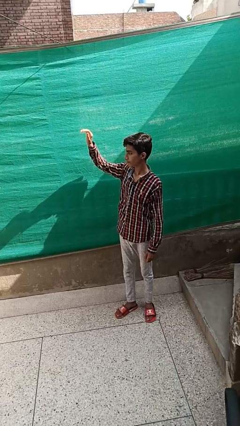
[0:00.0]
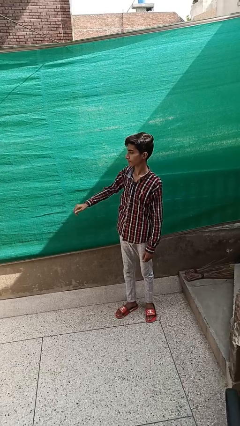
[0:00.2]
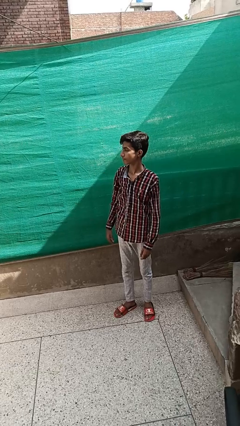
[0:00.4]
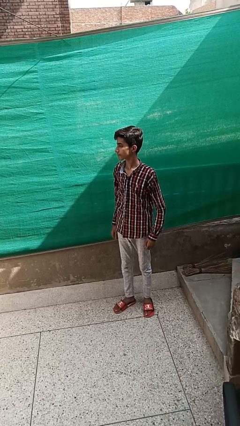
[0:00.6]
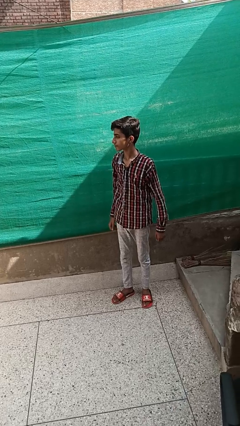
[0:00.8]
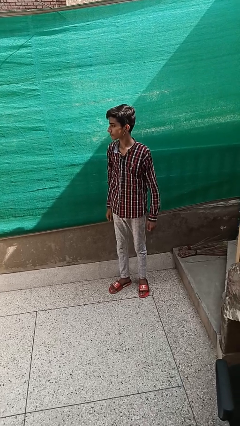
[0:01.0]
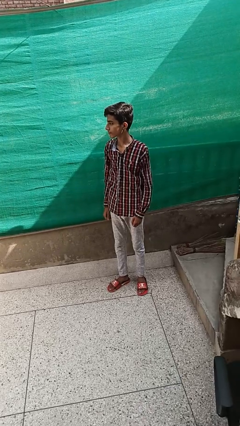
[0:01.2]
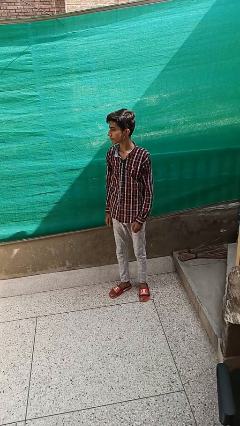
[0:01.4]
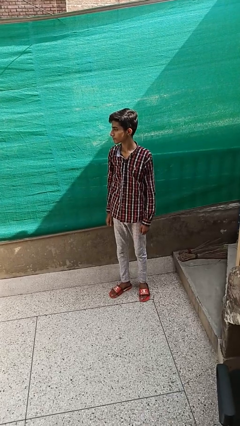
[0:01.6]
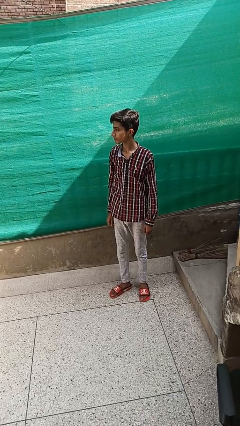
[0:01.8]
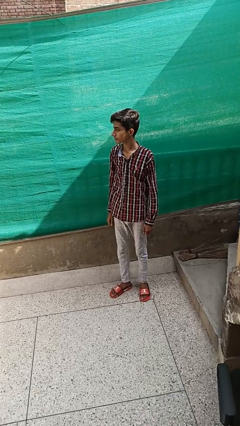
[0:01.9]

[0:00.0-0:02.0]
person gestures lower hand

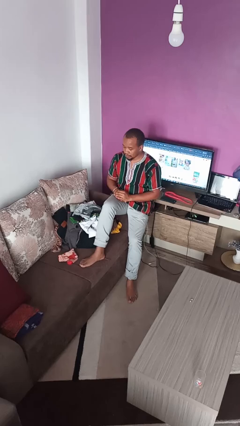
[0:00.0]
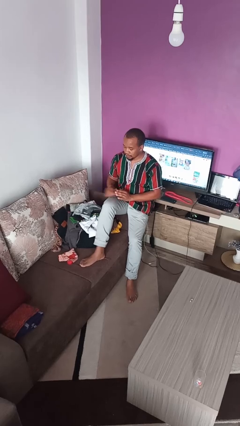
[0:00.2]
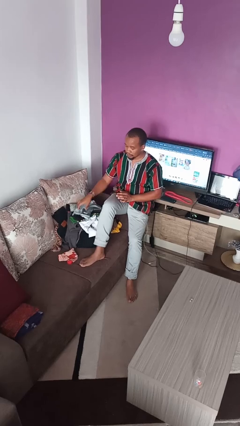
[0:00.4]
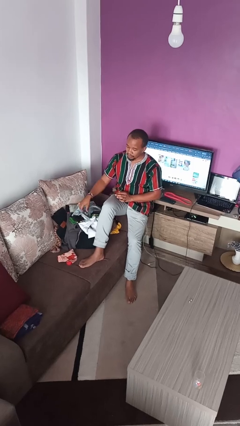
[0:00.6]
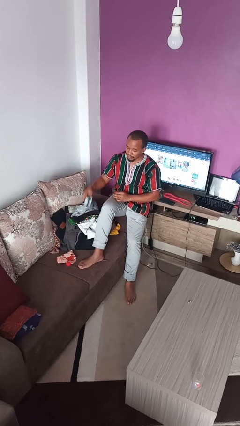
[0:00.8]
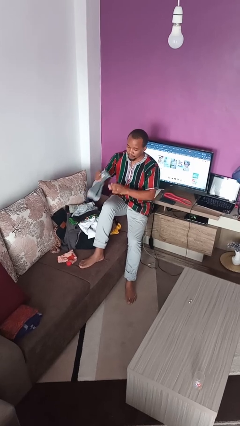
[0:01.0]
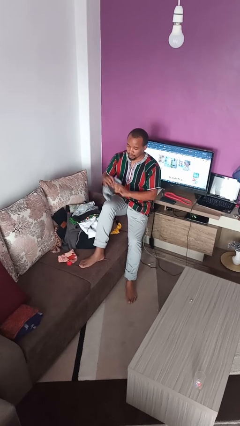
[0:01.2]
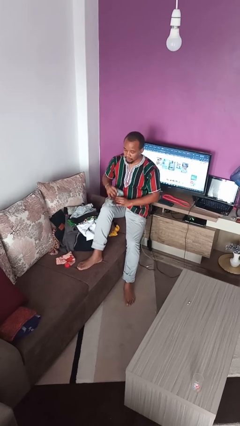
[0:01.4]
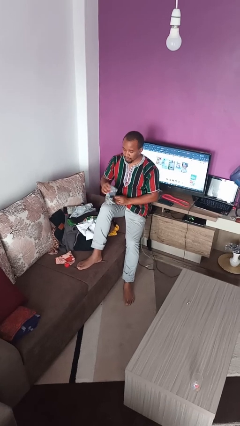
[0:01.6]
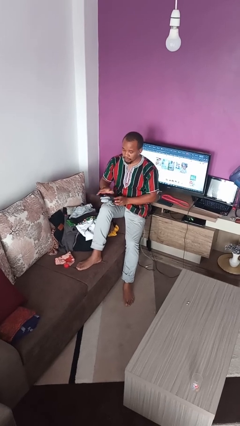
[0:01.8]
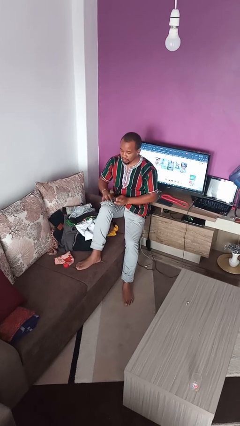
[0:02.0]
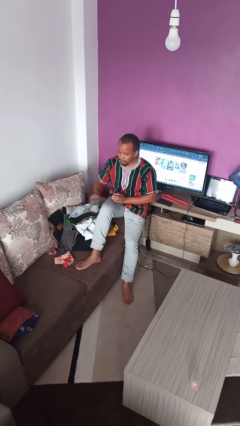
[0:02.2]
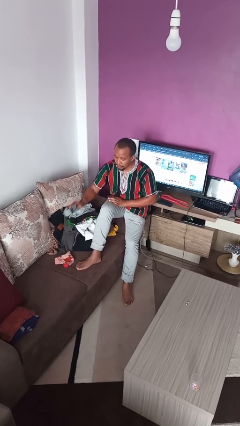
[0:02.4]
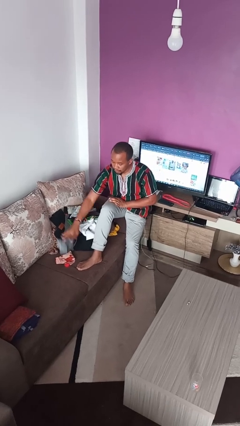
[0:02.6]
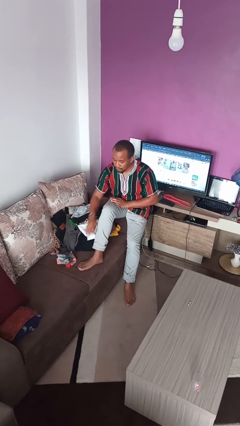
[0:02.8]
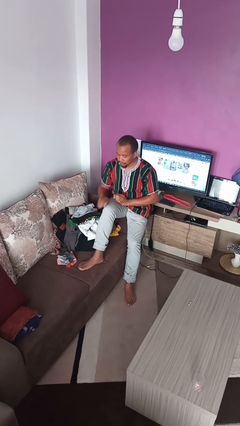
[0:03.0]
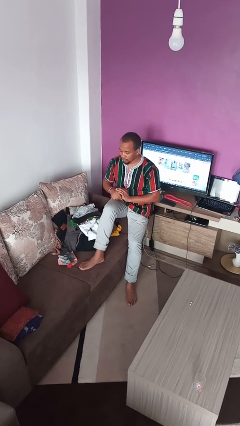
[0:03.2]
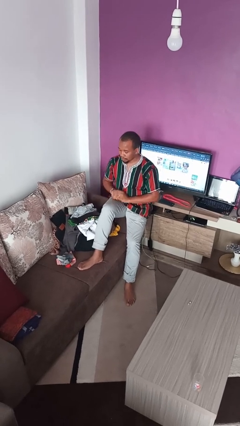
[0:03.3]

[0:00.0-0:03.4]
person folds socks

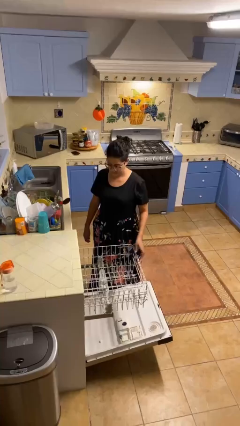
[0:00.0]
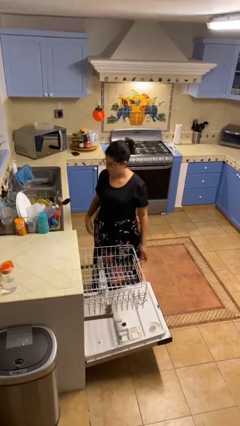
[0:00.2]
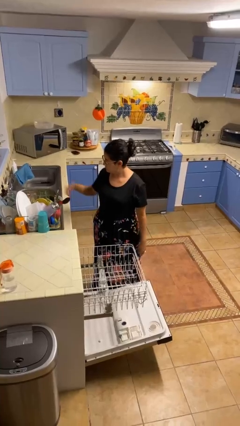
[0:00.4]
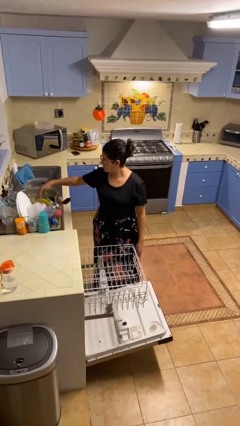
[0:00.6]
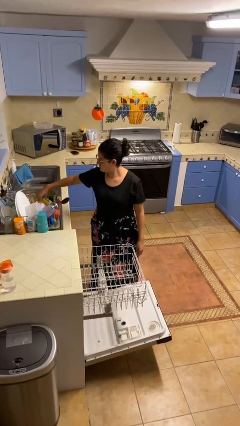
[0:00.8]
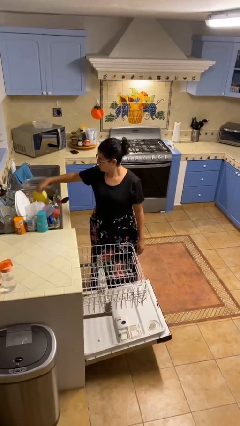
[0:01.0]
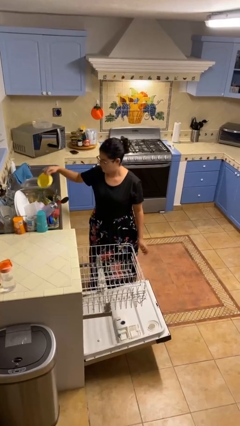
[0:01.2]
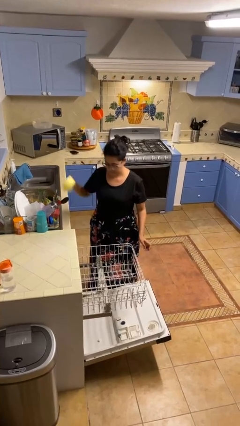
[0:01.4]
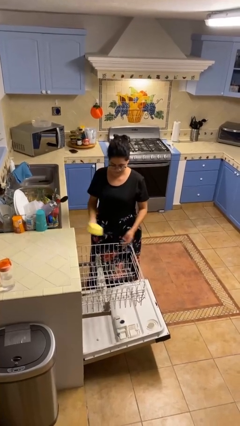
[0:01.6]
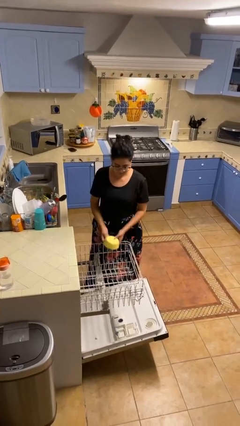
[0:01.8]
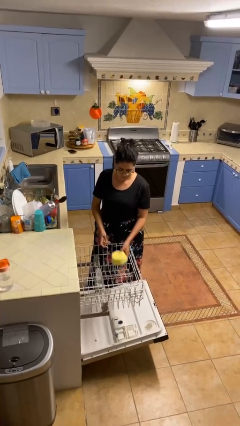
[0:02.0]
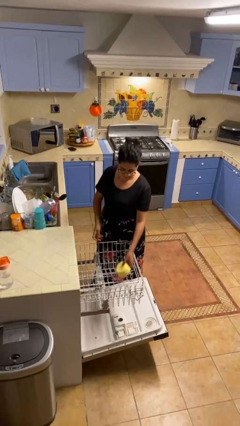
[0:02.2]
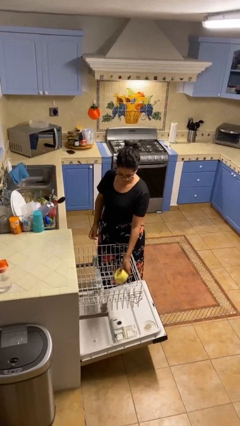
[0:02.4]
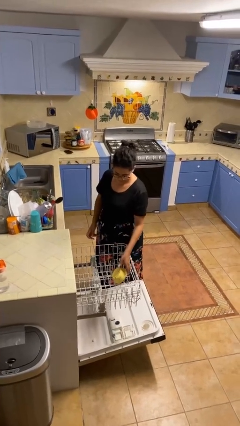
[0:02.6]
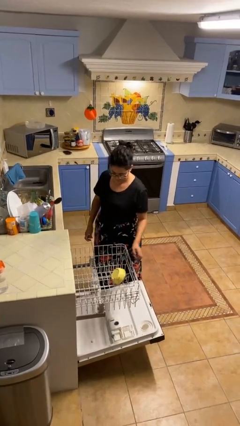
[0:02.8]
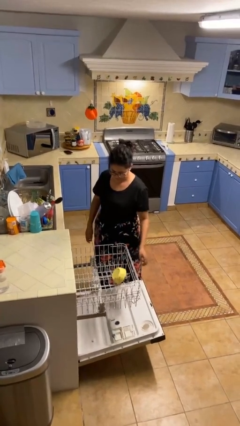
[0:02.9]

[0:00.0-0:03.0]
person loads dishwasher

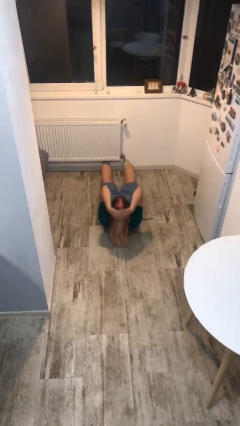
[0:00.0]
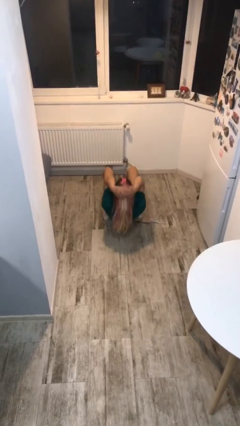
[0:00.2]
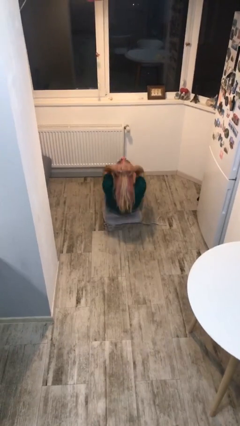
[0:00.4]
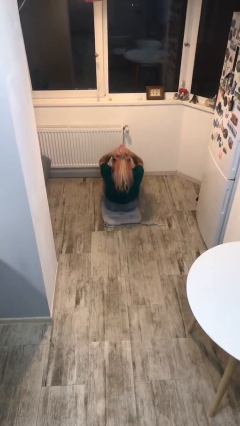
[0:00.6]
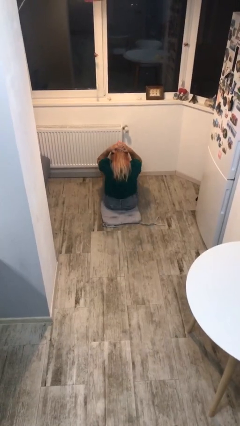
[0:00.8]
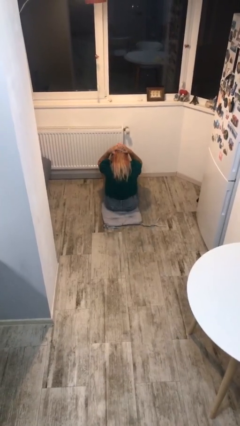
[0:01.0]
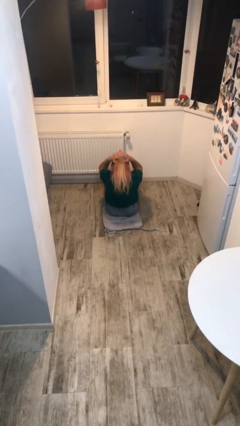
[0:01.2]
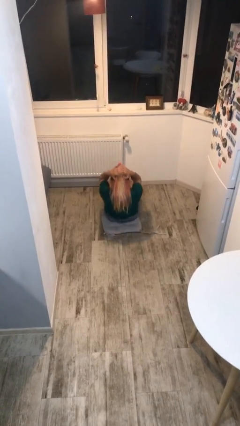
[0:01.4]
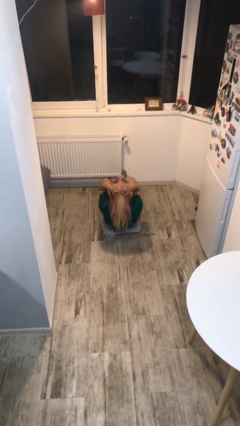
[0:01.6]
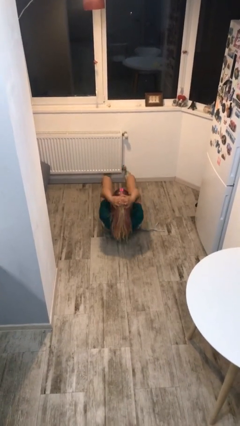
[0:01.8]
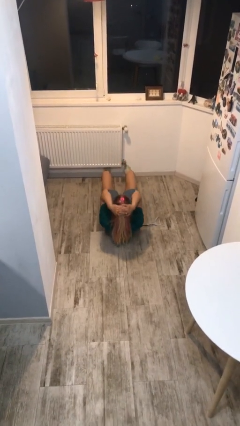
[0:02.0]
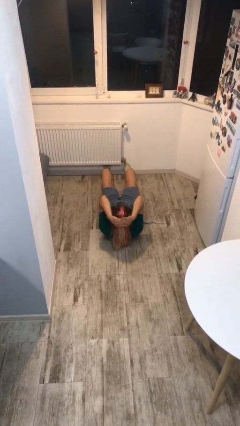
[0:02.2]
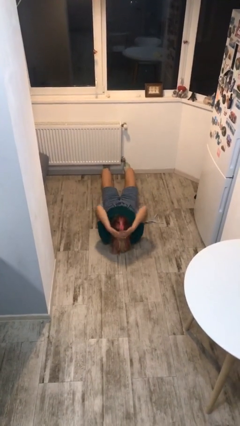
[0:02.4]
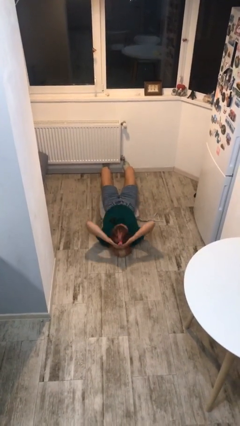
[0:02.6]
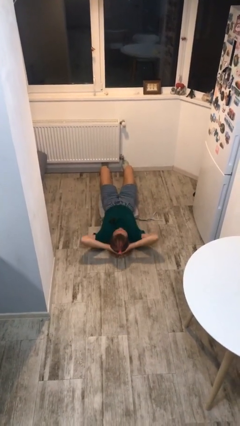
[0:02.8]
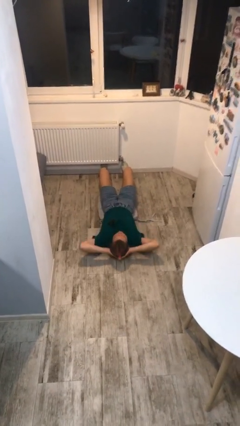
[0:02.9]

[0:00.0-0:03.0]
person exercises with situp

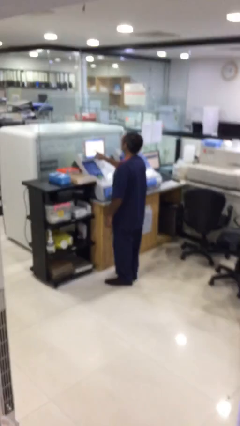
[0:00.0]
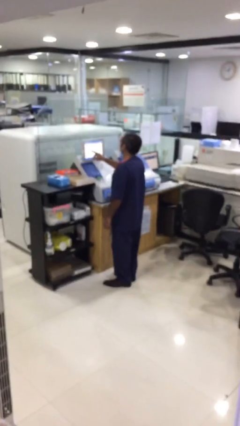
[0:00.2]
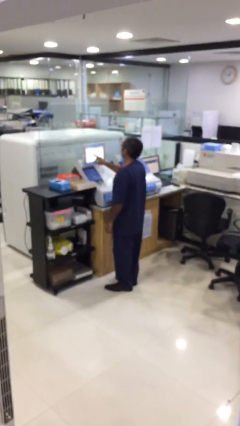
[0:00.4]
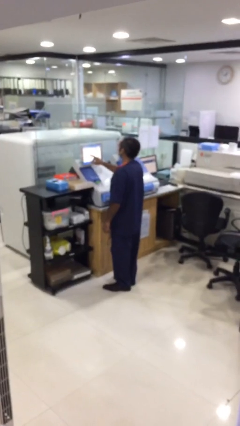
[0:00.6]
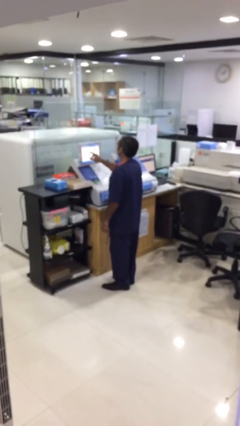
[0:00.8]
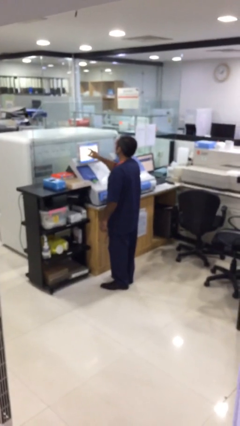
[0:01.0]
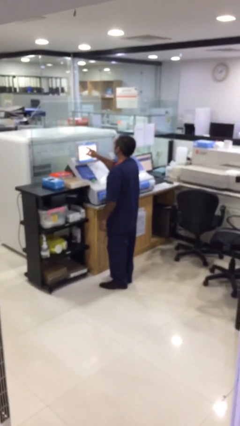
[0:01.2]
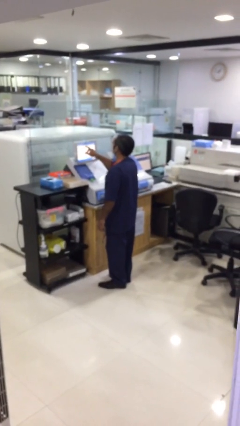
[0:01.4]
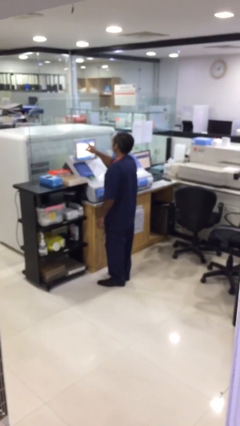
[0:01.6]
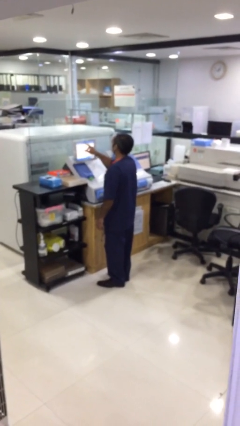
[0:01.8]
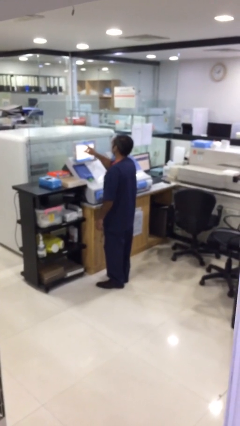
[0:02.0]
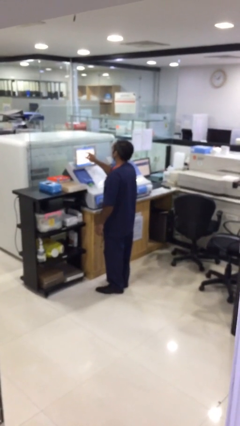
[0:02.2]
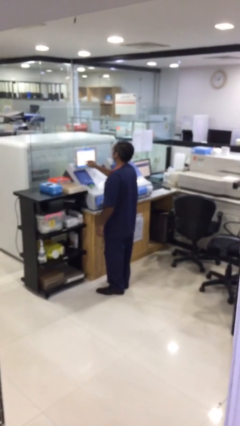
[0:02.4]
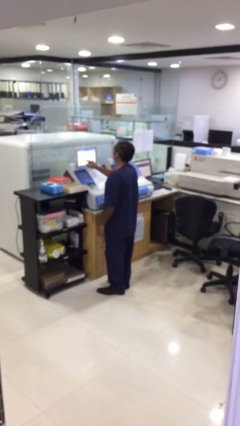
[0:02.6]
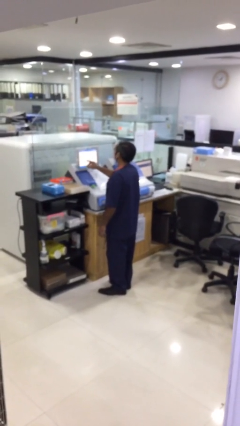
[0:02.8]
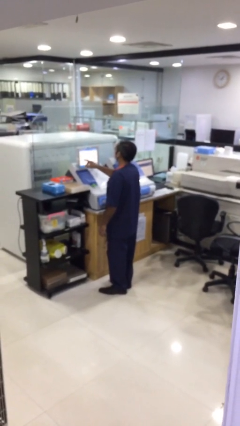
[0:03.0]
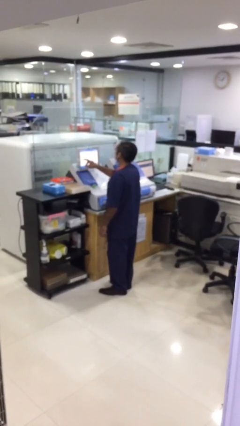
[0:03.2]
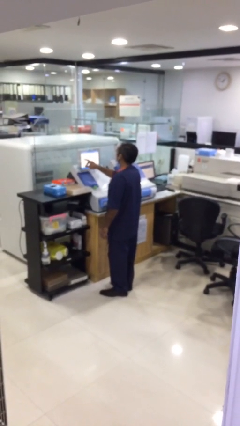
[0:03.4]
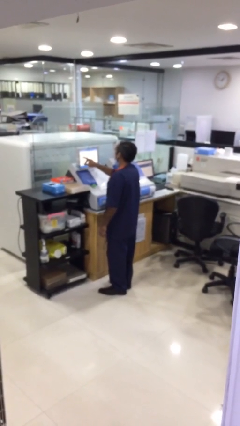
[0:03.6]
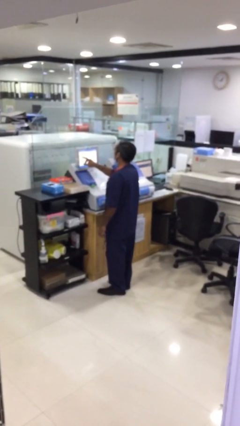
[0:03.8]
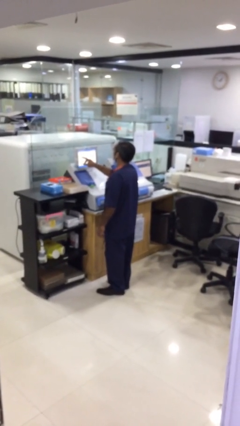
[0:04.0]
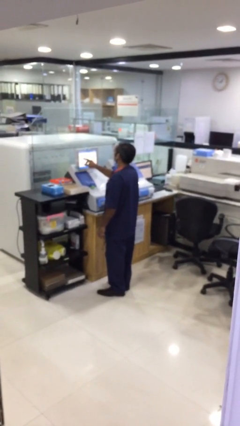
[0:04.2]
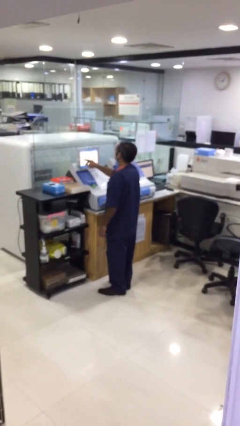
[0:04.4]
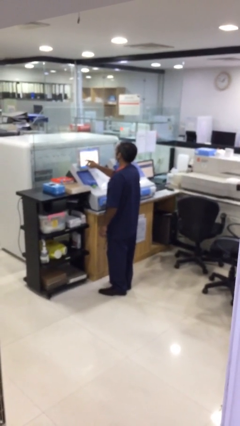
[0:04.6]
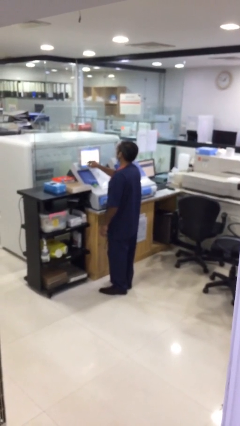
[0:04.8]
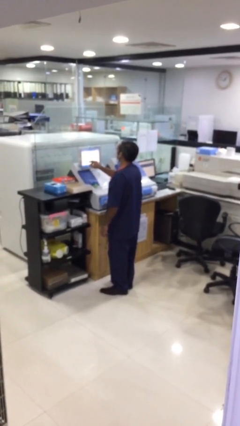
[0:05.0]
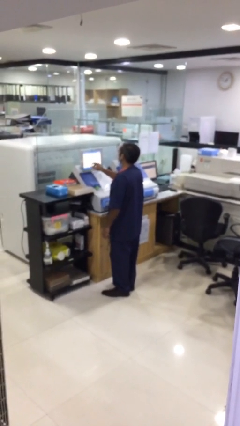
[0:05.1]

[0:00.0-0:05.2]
person purchases from machine

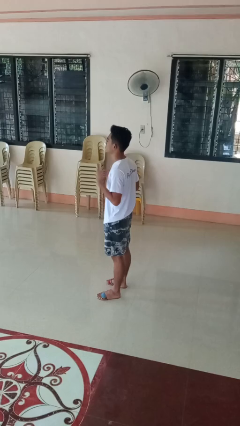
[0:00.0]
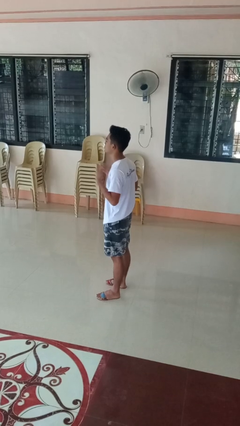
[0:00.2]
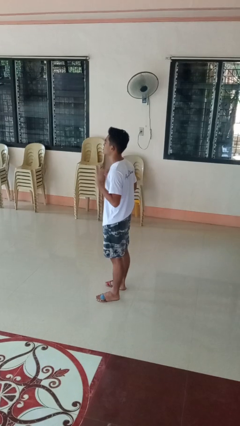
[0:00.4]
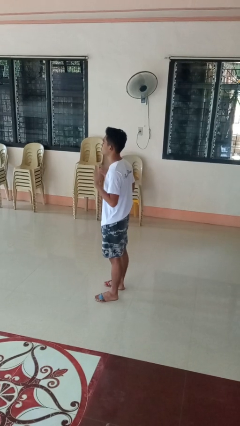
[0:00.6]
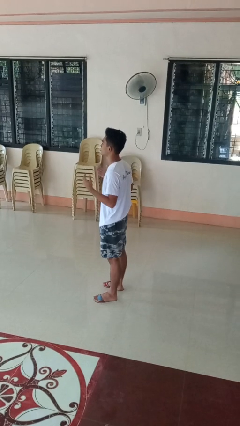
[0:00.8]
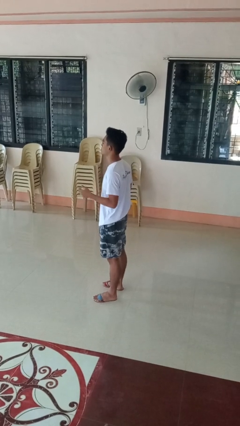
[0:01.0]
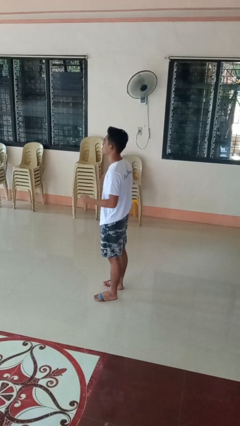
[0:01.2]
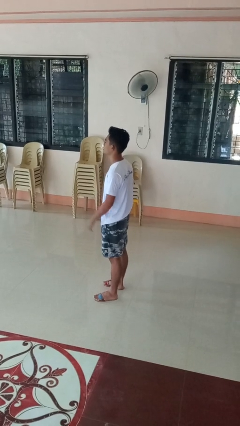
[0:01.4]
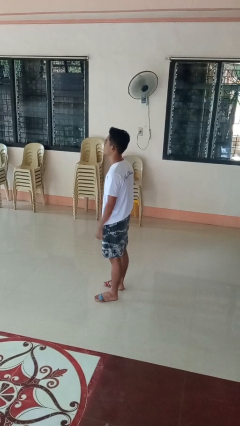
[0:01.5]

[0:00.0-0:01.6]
person drums on chest
